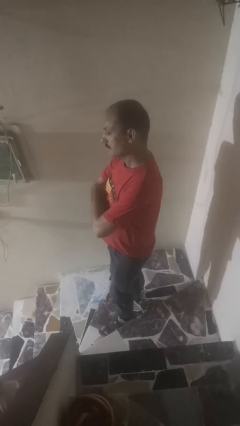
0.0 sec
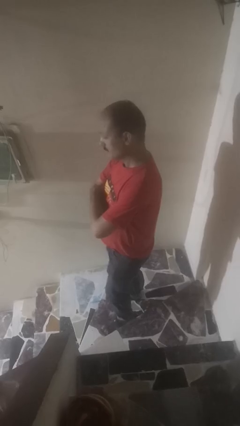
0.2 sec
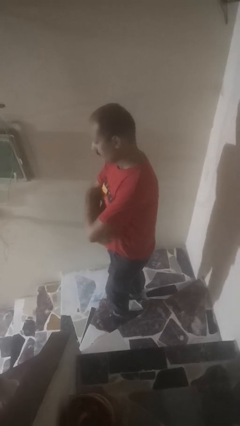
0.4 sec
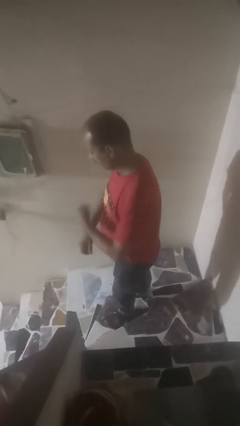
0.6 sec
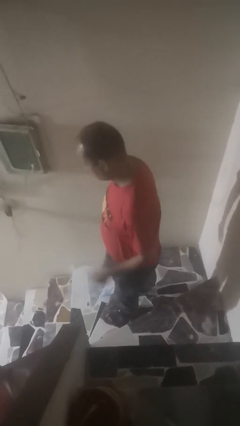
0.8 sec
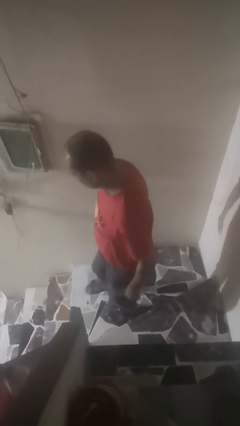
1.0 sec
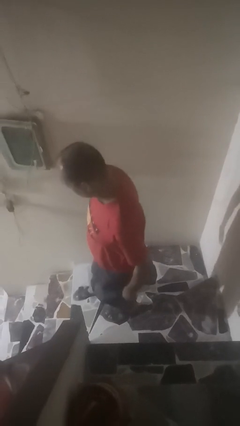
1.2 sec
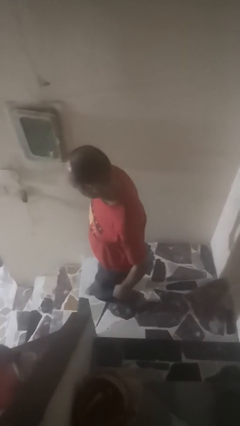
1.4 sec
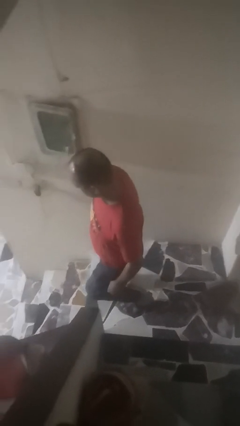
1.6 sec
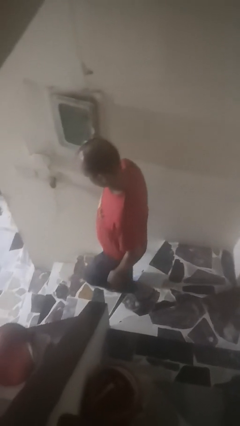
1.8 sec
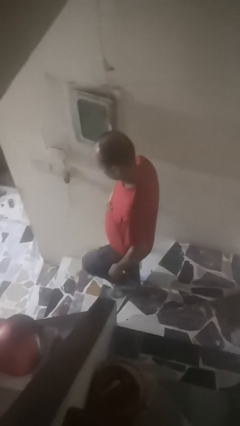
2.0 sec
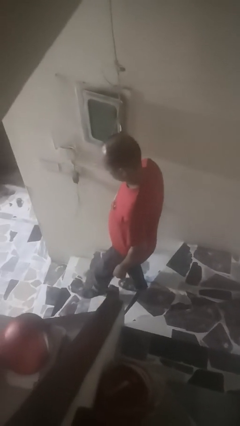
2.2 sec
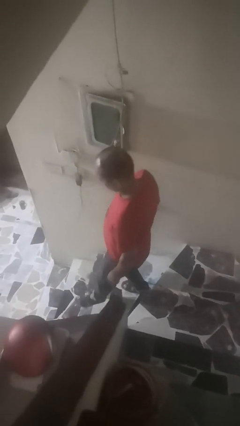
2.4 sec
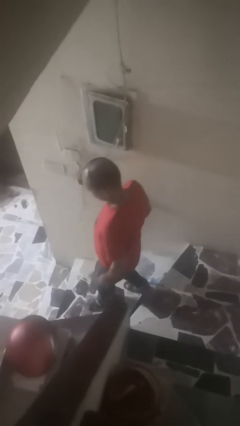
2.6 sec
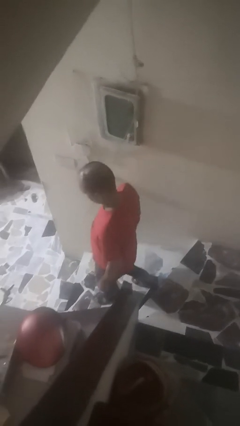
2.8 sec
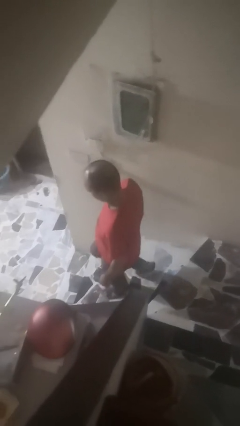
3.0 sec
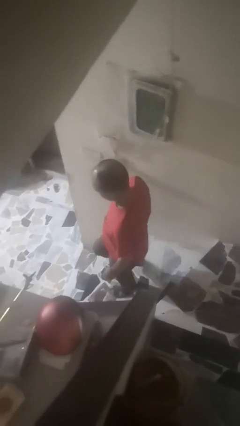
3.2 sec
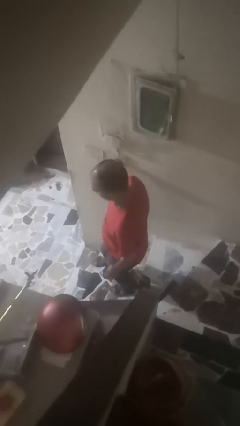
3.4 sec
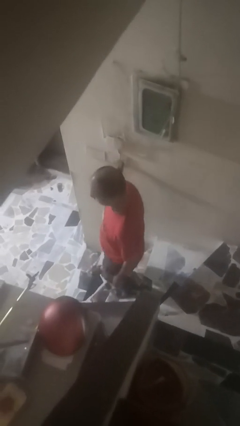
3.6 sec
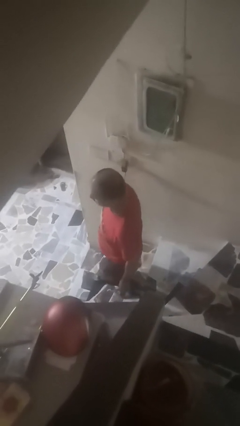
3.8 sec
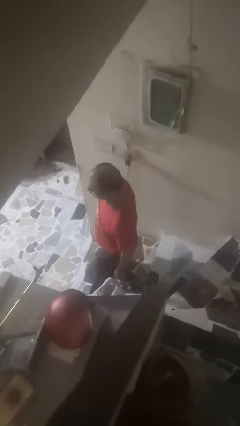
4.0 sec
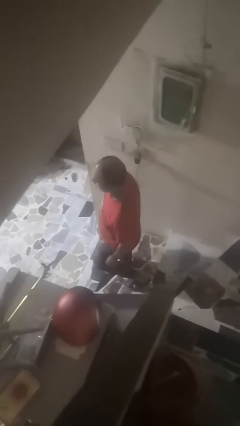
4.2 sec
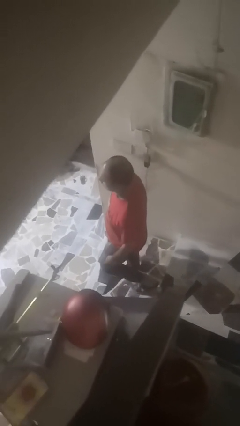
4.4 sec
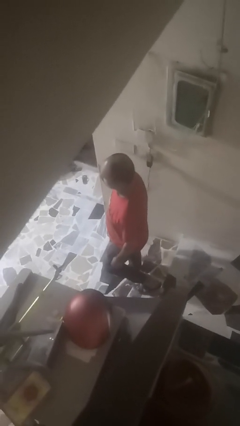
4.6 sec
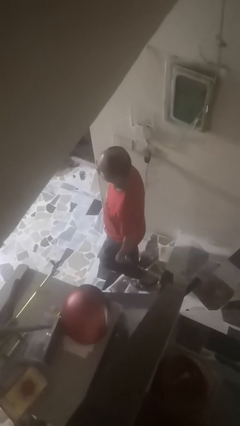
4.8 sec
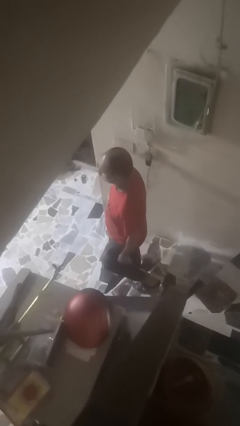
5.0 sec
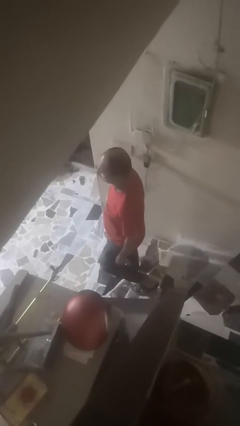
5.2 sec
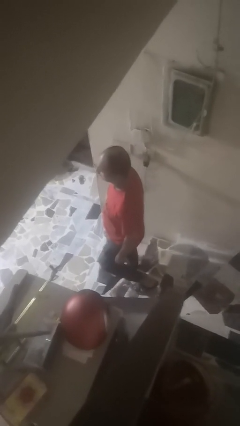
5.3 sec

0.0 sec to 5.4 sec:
person climbs down stairs

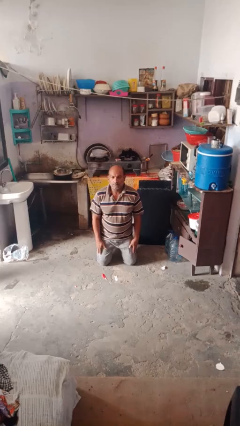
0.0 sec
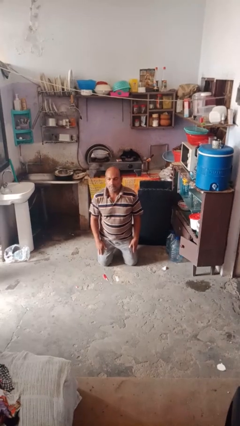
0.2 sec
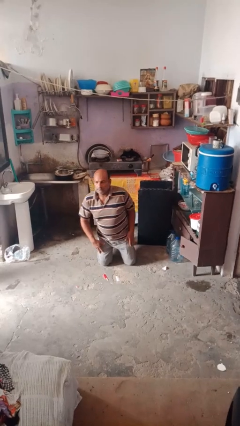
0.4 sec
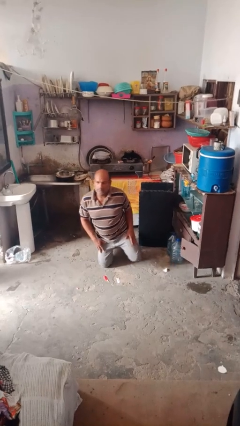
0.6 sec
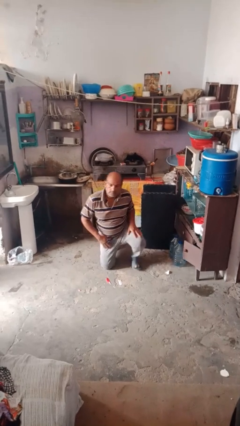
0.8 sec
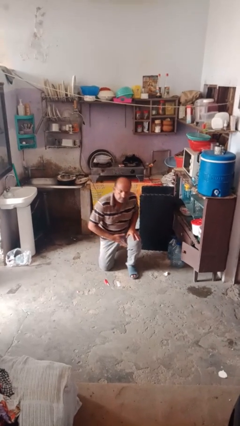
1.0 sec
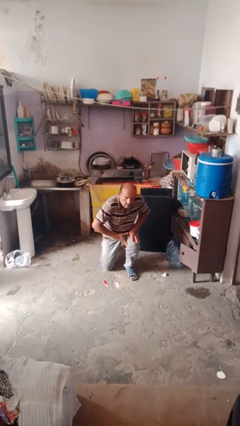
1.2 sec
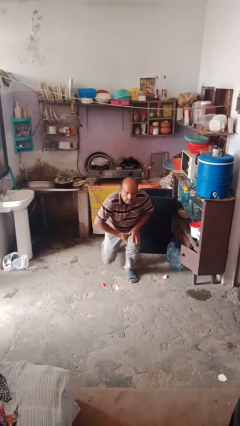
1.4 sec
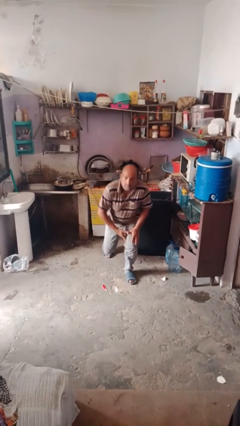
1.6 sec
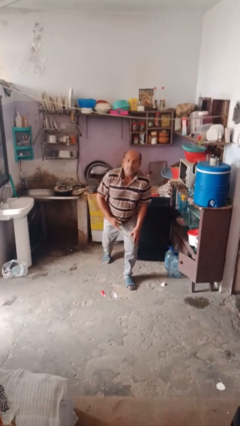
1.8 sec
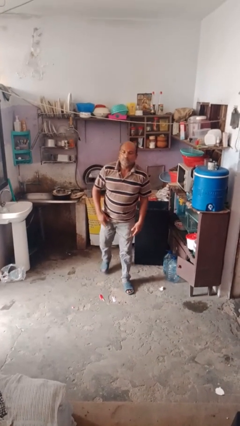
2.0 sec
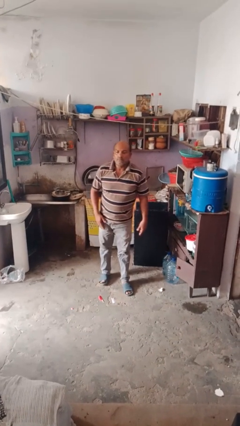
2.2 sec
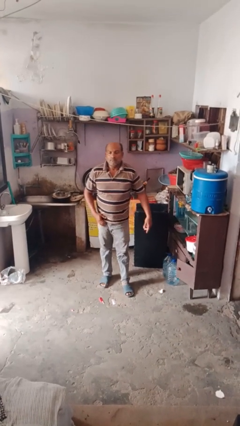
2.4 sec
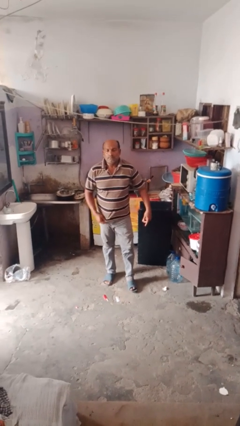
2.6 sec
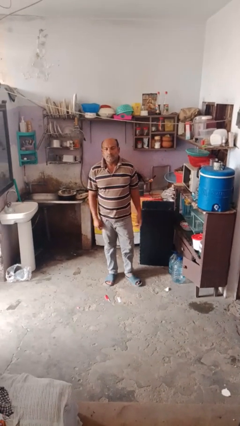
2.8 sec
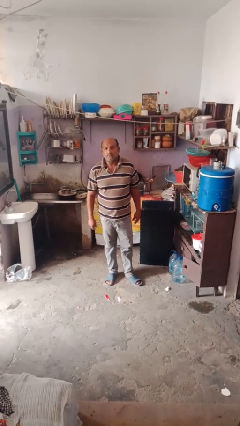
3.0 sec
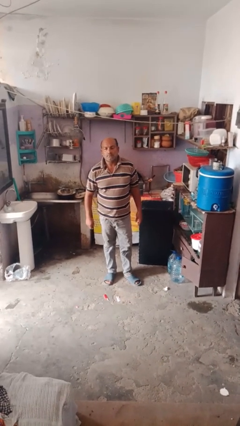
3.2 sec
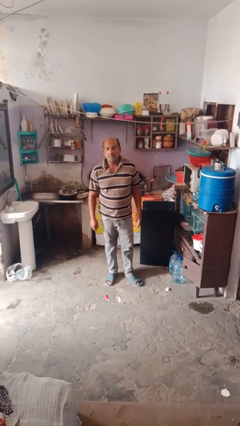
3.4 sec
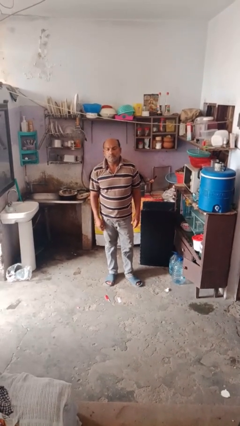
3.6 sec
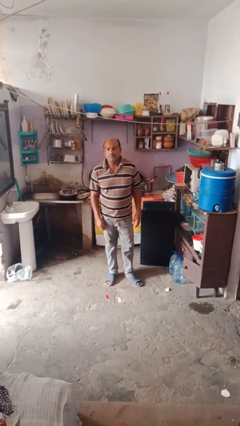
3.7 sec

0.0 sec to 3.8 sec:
person stands up from floor

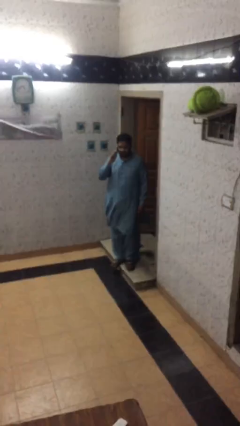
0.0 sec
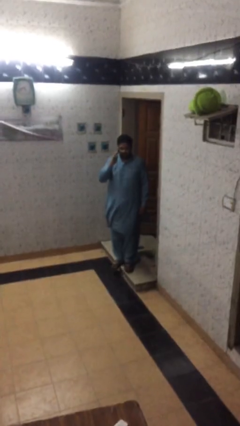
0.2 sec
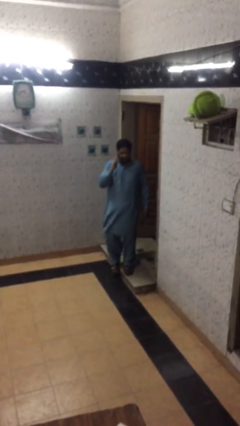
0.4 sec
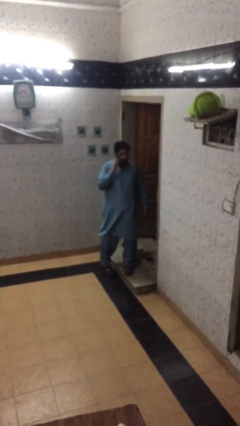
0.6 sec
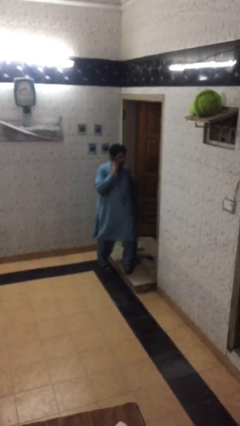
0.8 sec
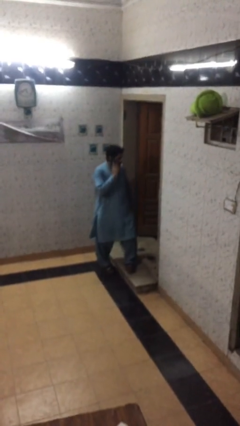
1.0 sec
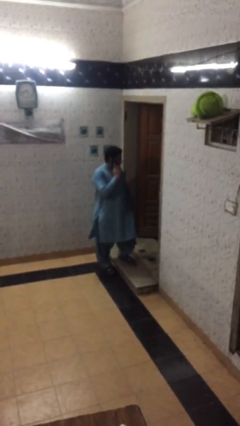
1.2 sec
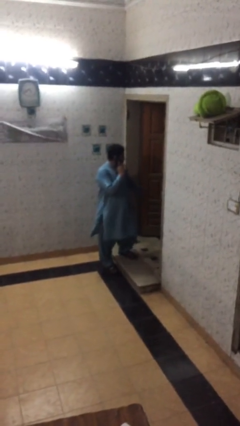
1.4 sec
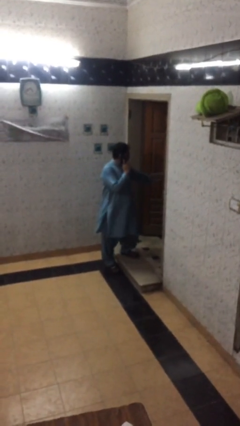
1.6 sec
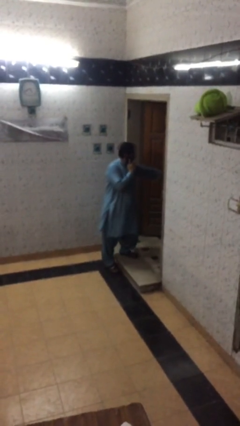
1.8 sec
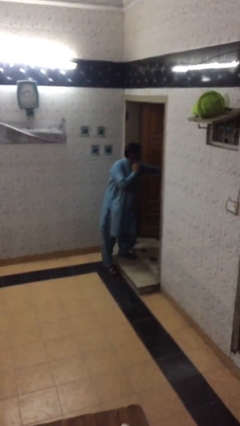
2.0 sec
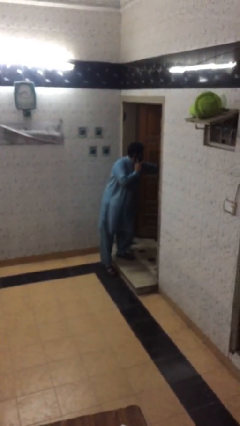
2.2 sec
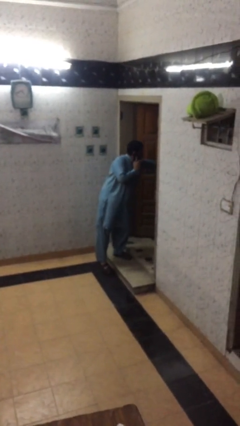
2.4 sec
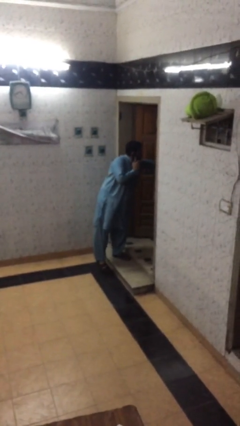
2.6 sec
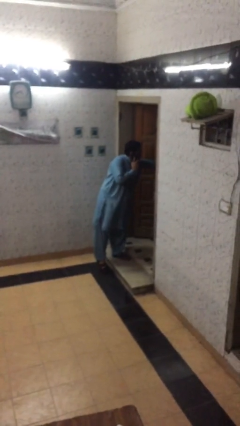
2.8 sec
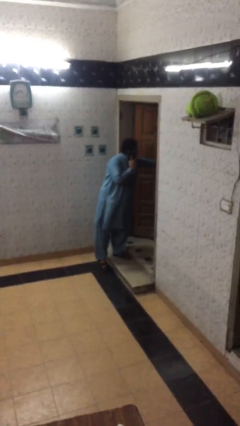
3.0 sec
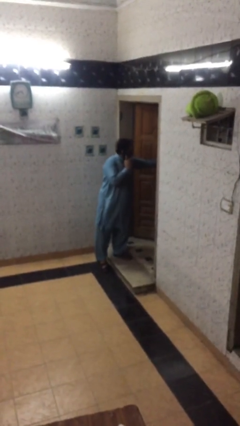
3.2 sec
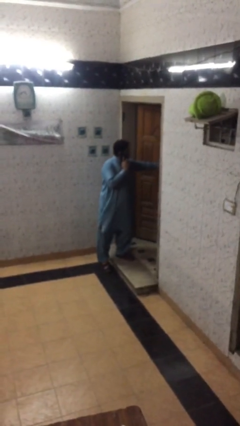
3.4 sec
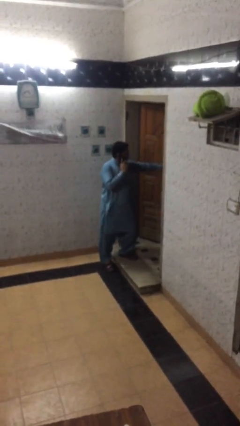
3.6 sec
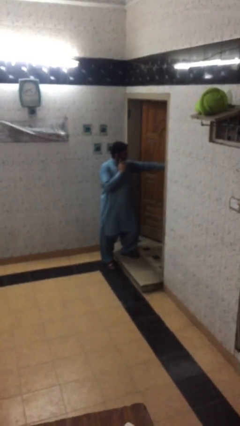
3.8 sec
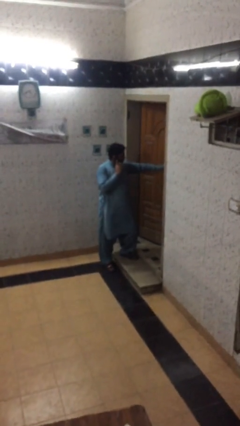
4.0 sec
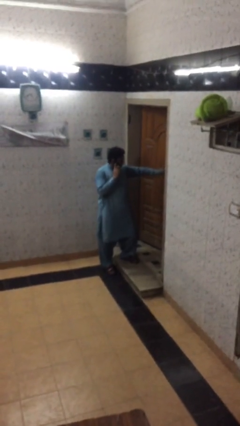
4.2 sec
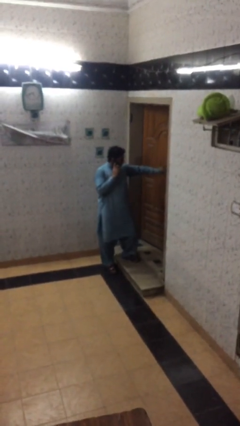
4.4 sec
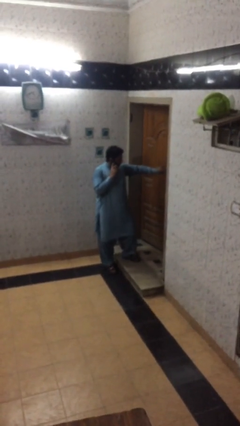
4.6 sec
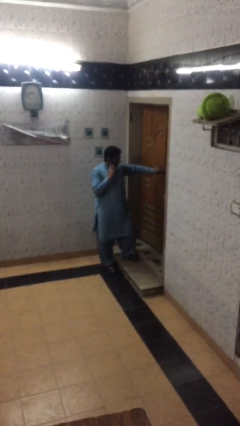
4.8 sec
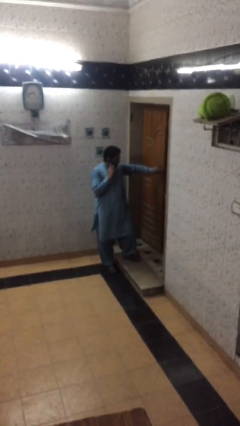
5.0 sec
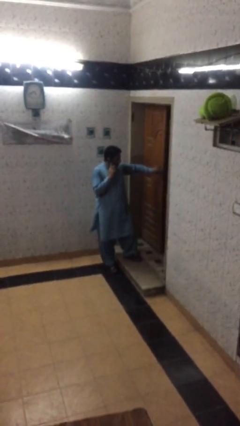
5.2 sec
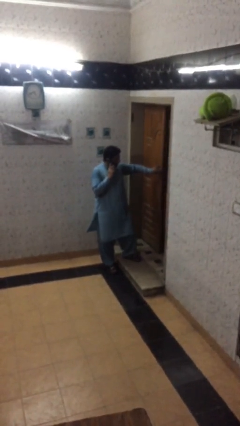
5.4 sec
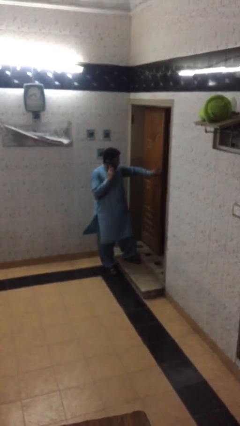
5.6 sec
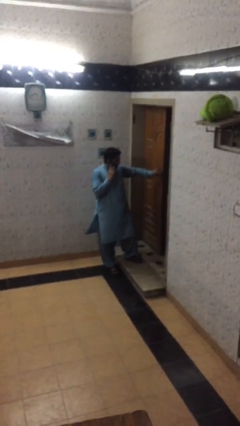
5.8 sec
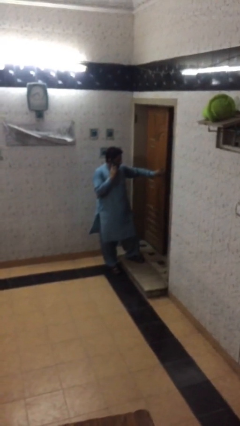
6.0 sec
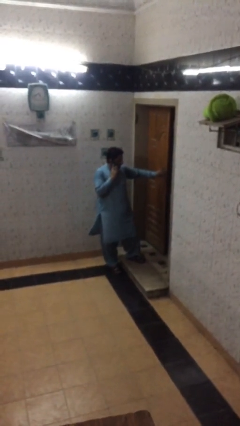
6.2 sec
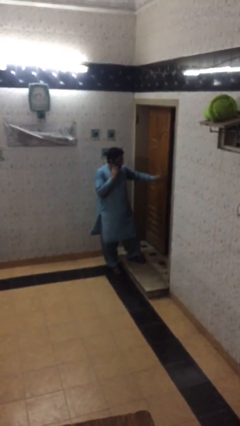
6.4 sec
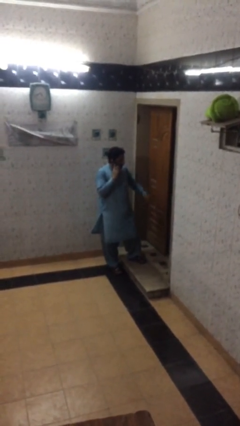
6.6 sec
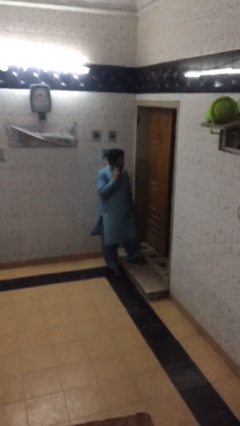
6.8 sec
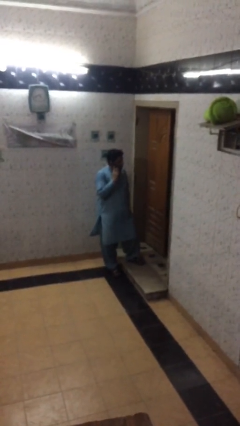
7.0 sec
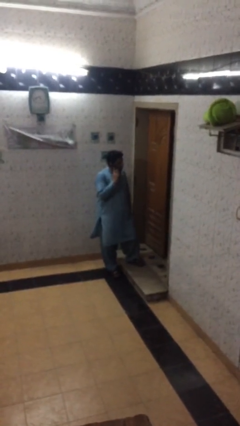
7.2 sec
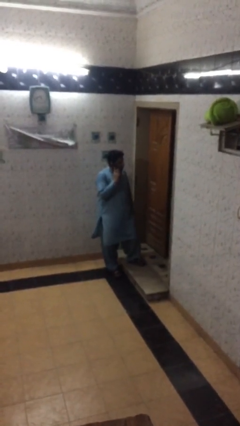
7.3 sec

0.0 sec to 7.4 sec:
person closes facility door

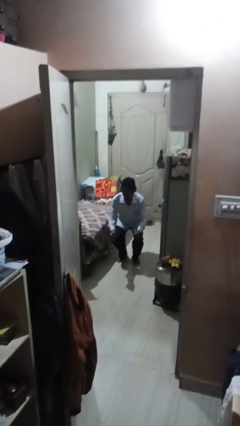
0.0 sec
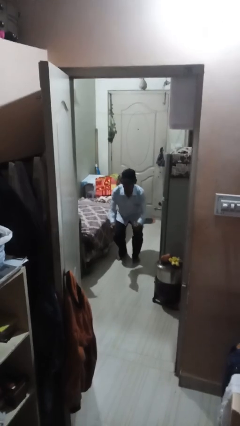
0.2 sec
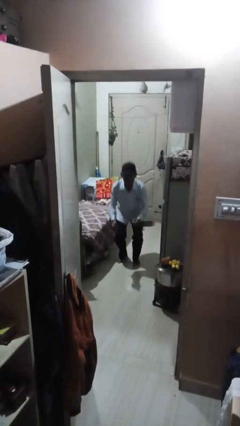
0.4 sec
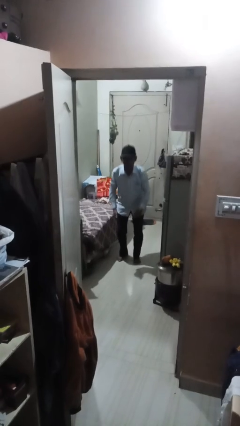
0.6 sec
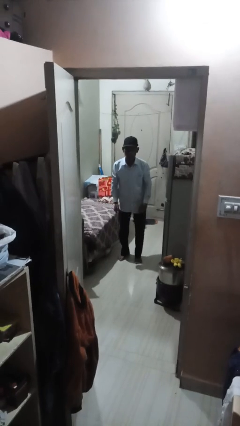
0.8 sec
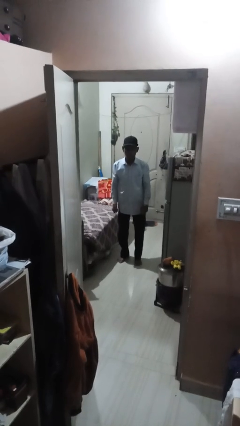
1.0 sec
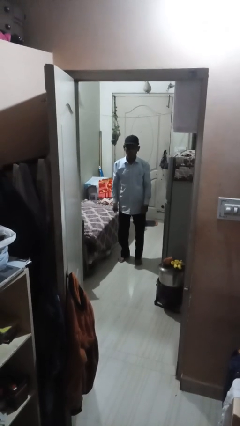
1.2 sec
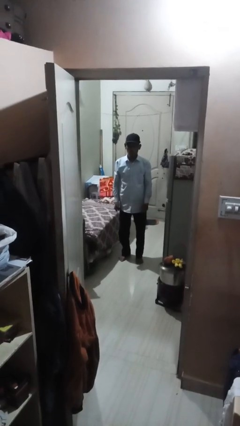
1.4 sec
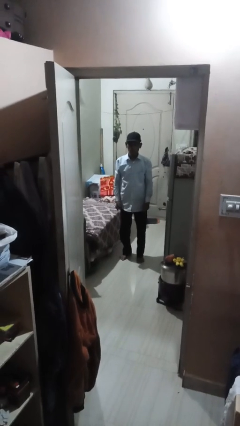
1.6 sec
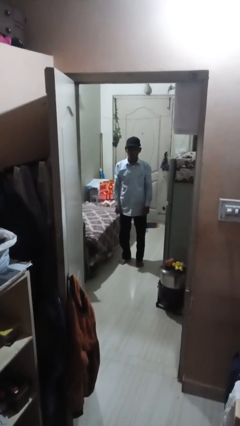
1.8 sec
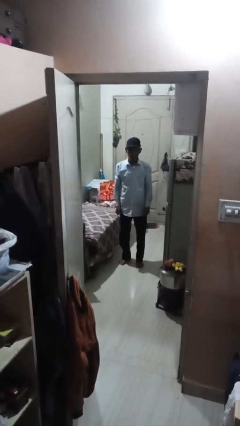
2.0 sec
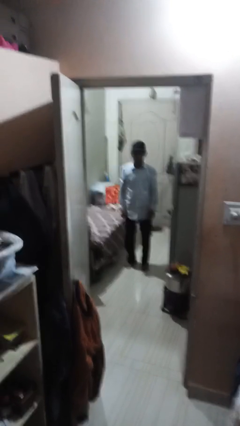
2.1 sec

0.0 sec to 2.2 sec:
person stands up
